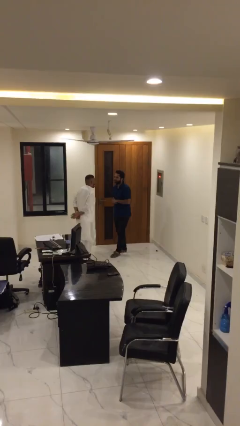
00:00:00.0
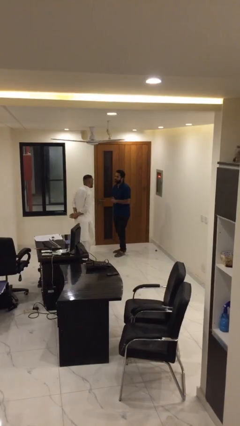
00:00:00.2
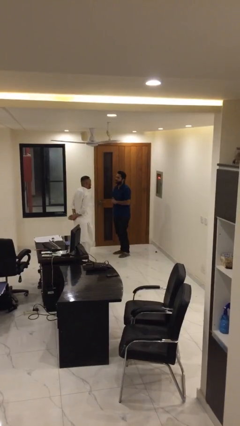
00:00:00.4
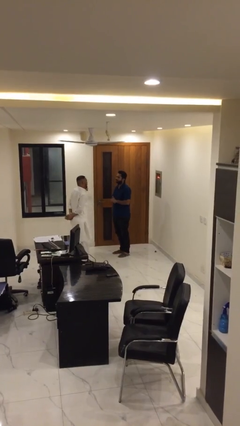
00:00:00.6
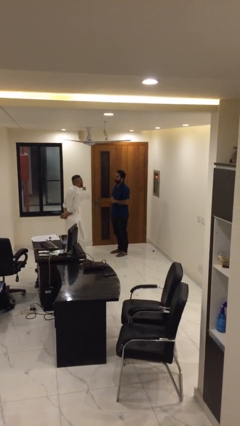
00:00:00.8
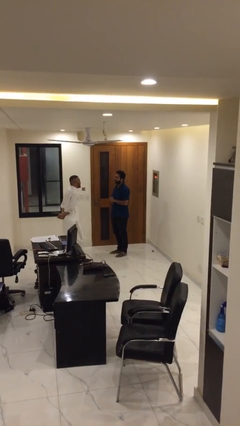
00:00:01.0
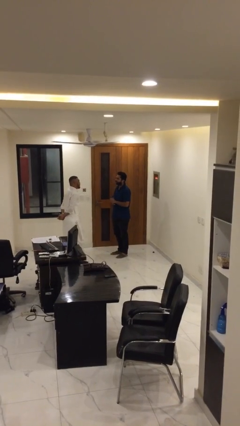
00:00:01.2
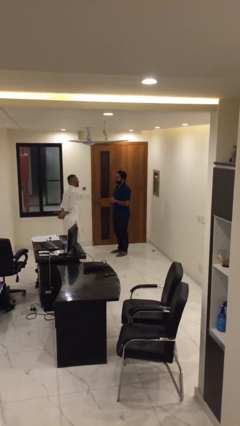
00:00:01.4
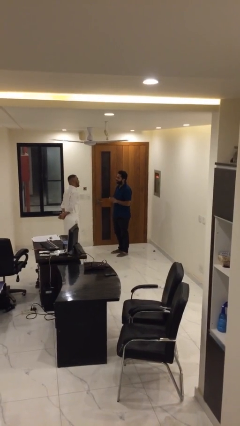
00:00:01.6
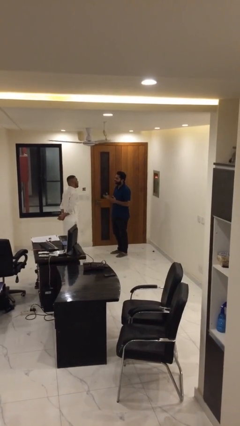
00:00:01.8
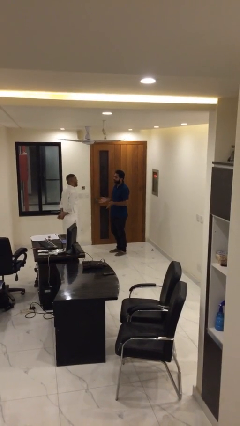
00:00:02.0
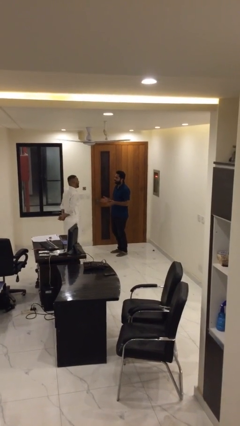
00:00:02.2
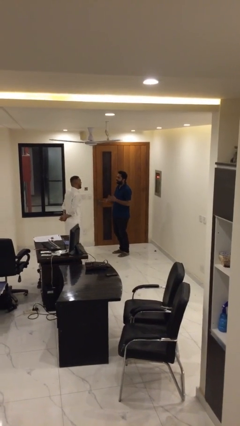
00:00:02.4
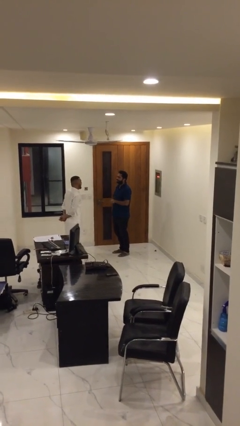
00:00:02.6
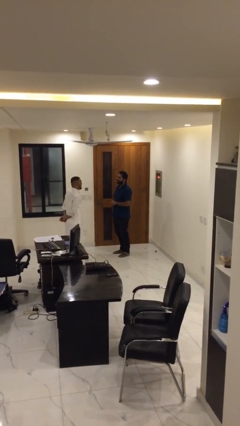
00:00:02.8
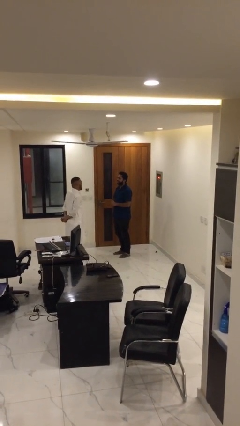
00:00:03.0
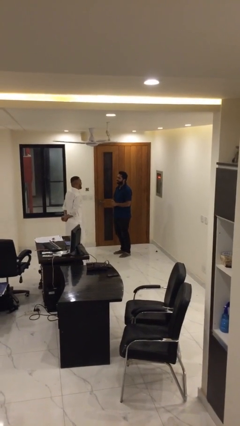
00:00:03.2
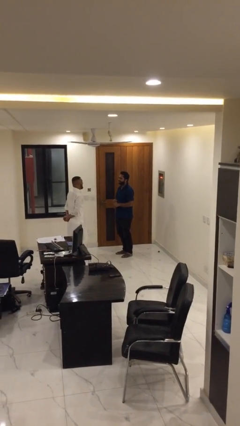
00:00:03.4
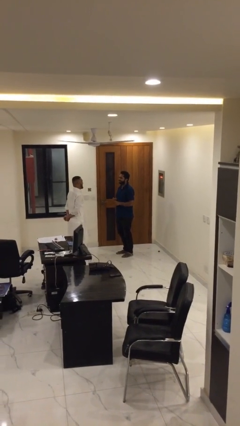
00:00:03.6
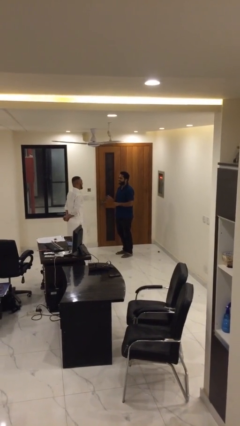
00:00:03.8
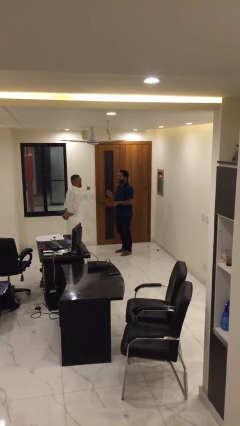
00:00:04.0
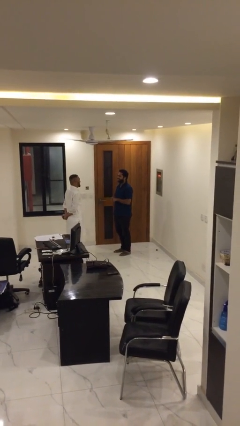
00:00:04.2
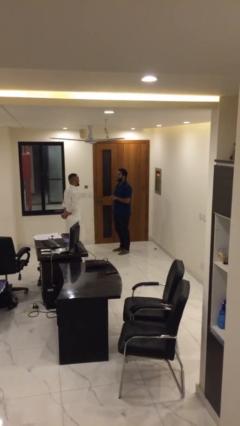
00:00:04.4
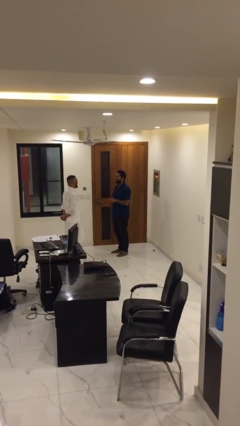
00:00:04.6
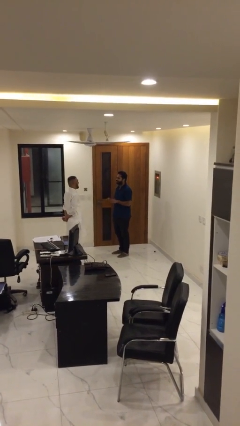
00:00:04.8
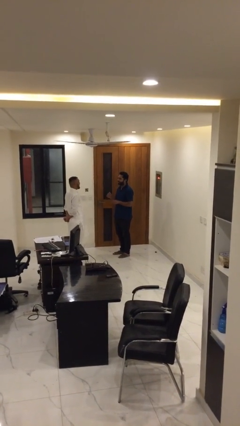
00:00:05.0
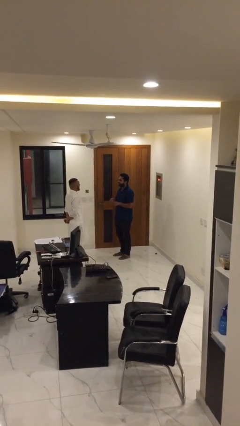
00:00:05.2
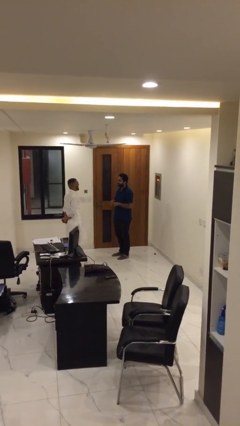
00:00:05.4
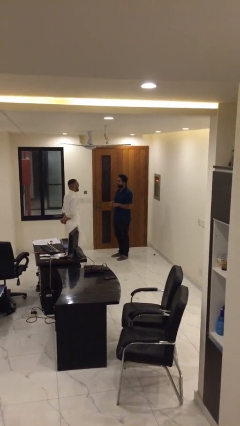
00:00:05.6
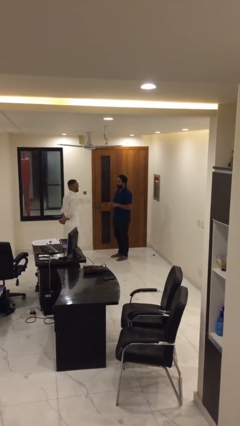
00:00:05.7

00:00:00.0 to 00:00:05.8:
person talks to person

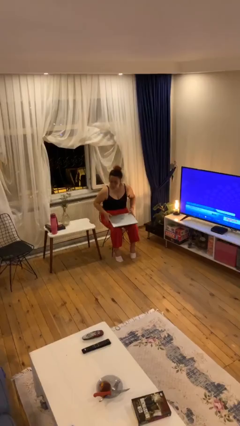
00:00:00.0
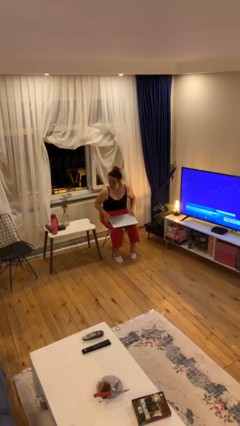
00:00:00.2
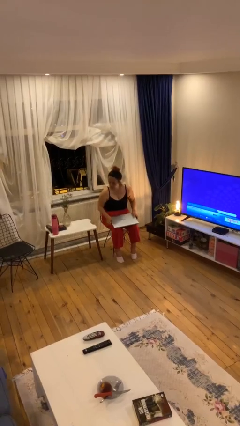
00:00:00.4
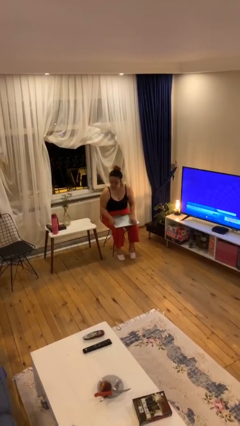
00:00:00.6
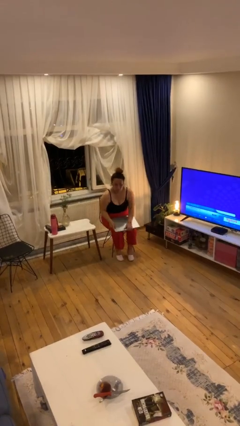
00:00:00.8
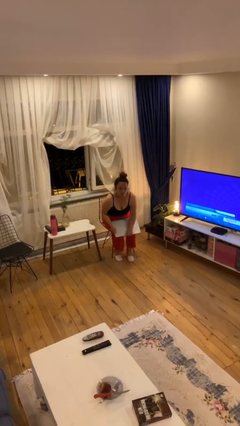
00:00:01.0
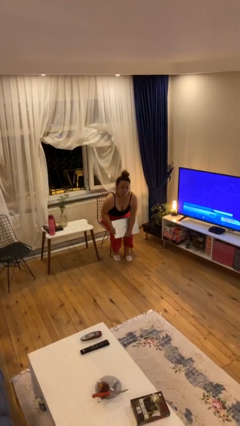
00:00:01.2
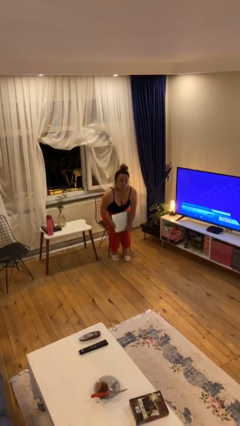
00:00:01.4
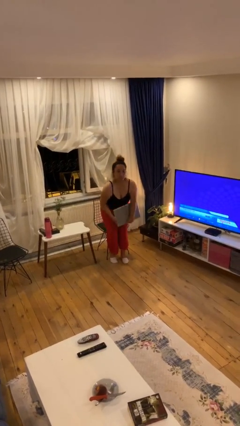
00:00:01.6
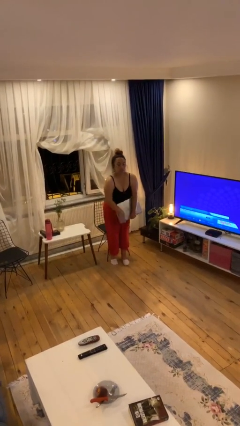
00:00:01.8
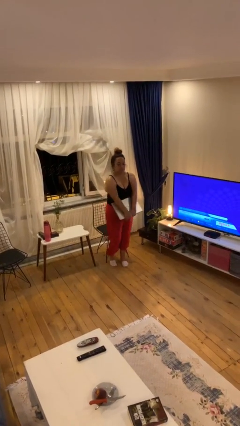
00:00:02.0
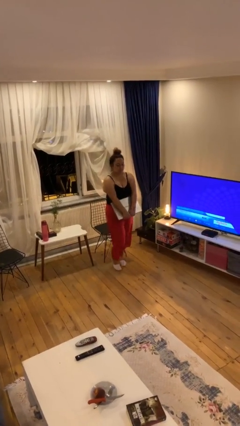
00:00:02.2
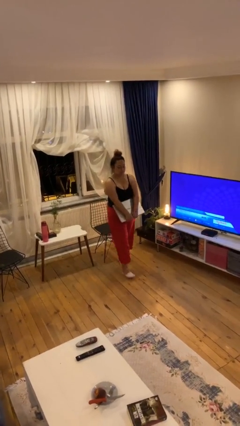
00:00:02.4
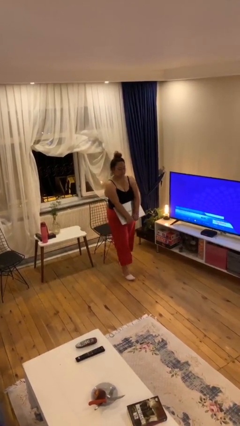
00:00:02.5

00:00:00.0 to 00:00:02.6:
person stands up

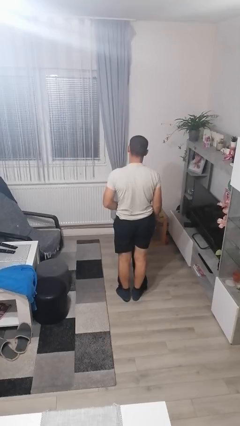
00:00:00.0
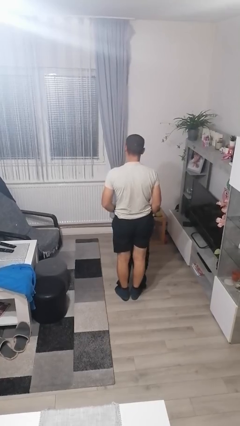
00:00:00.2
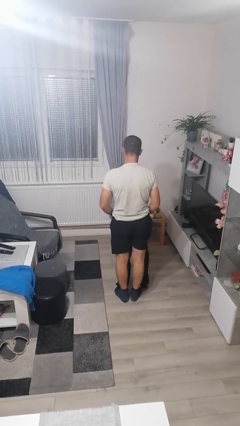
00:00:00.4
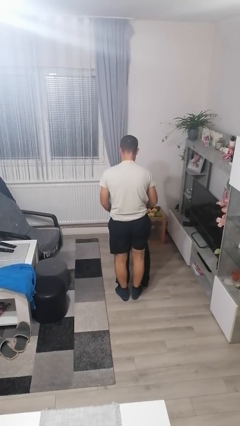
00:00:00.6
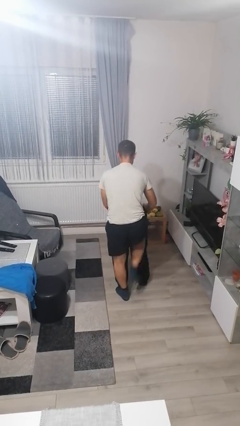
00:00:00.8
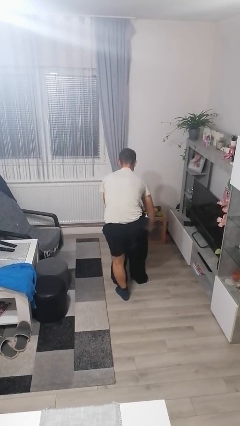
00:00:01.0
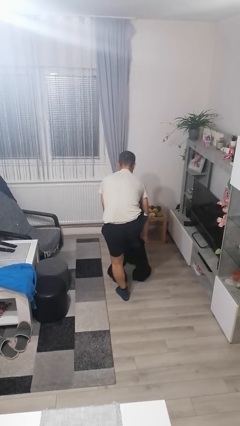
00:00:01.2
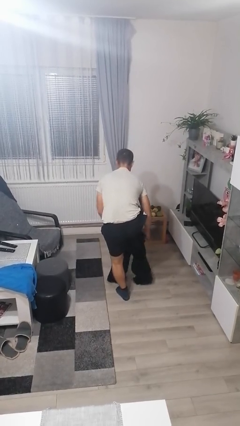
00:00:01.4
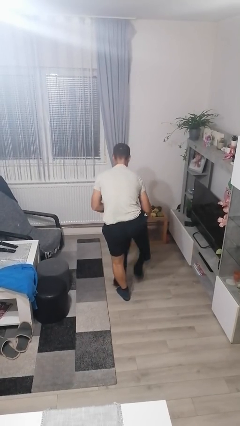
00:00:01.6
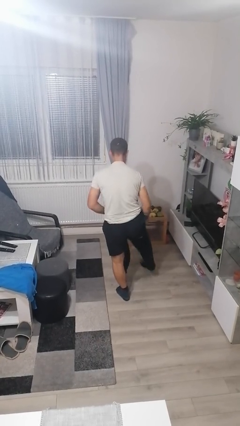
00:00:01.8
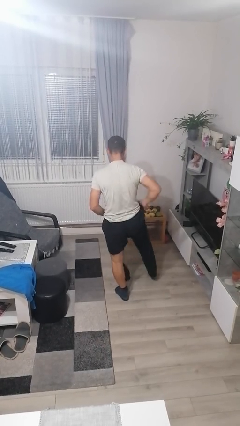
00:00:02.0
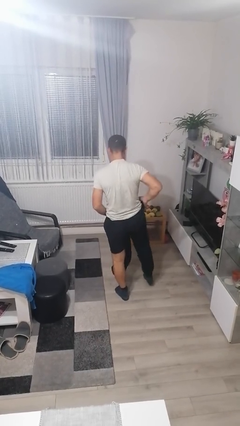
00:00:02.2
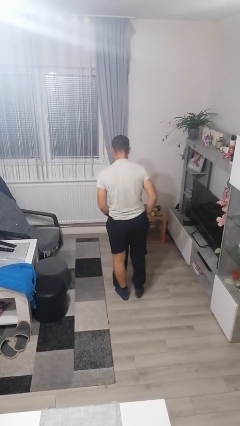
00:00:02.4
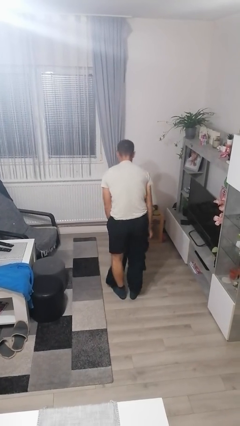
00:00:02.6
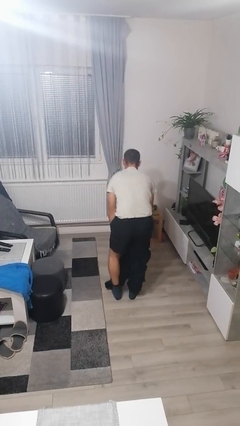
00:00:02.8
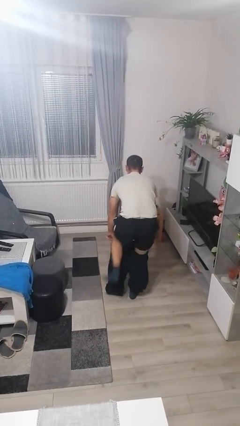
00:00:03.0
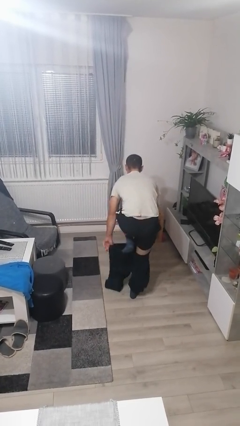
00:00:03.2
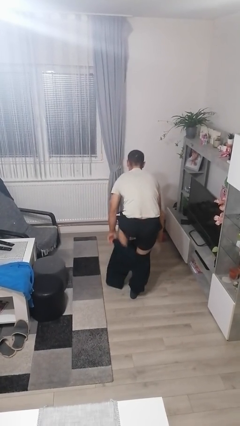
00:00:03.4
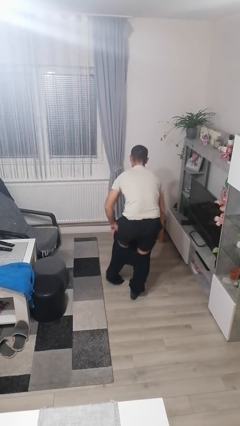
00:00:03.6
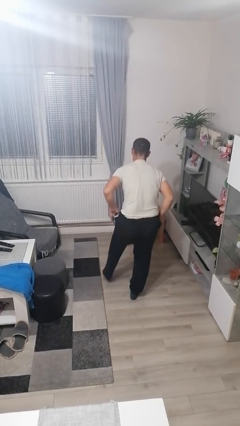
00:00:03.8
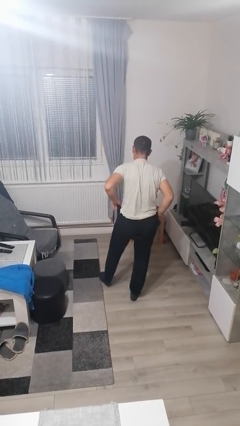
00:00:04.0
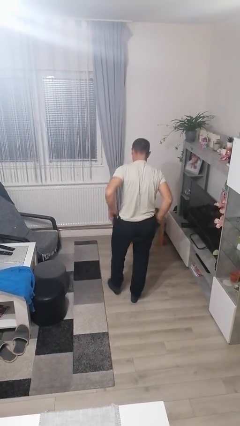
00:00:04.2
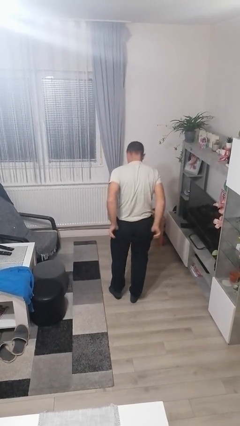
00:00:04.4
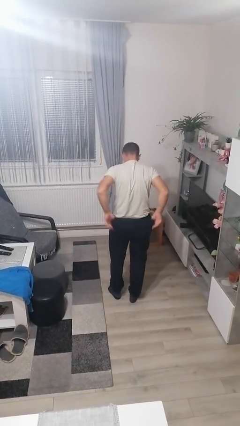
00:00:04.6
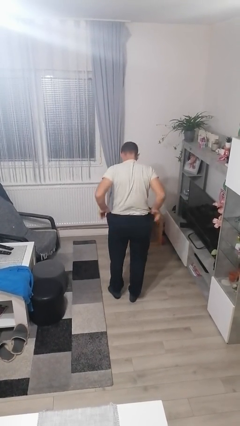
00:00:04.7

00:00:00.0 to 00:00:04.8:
person puts on pants

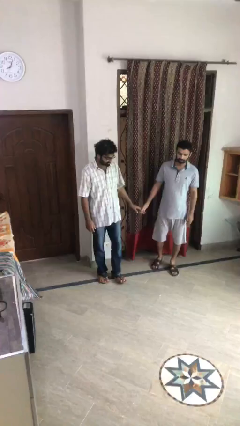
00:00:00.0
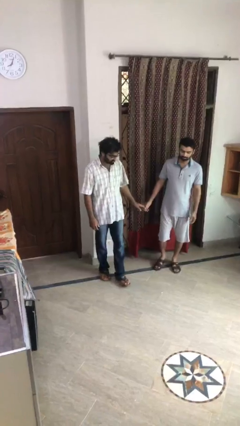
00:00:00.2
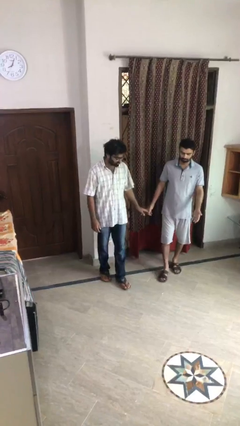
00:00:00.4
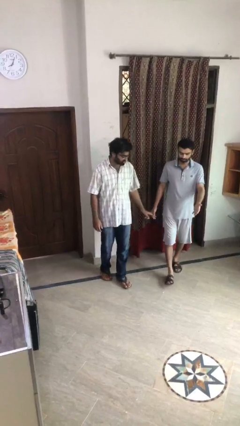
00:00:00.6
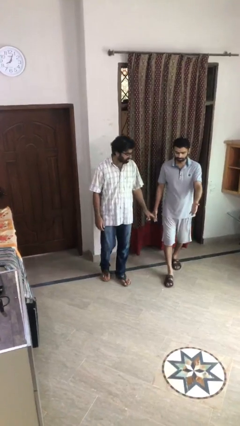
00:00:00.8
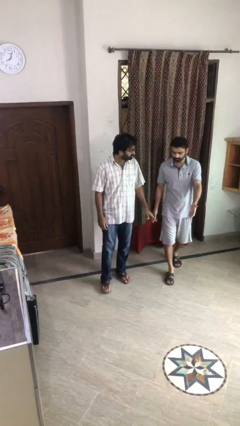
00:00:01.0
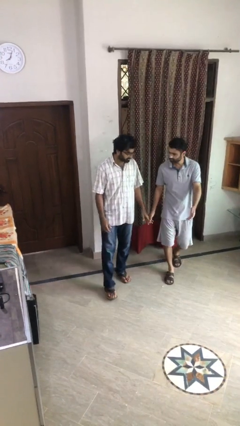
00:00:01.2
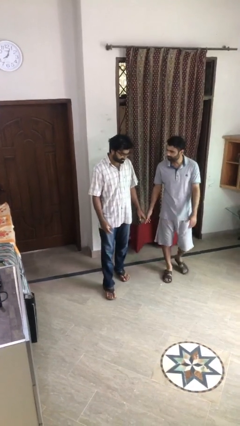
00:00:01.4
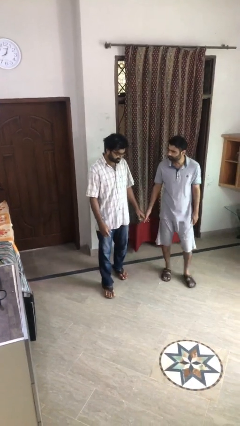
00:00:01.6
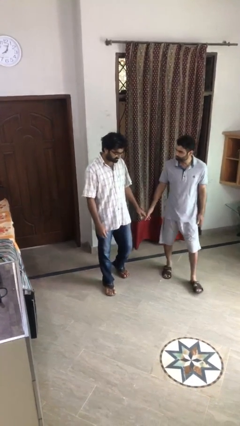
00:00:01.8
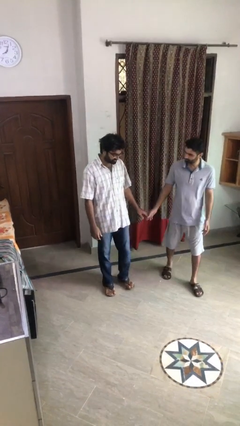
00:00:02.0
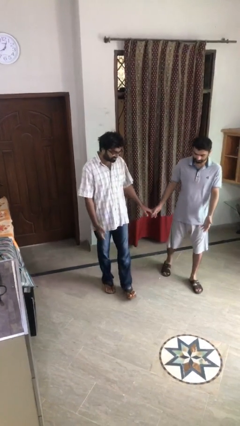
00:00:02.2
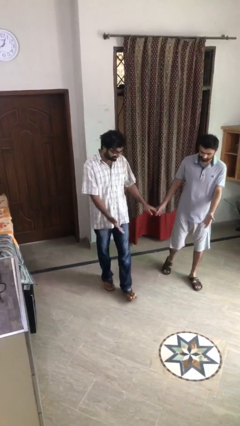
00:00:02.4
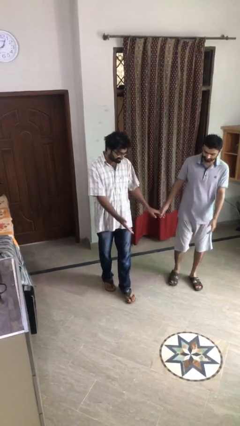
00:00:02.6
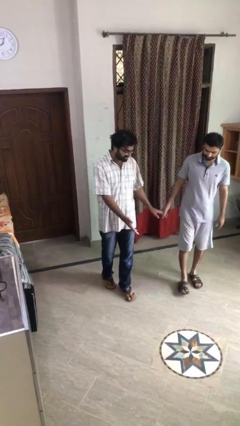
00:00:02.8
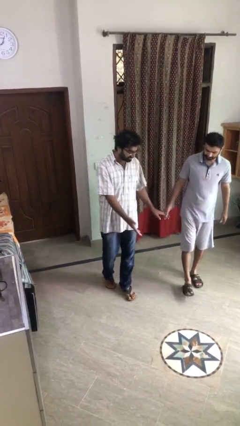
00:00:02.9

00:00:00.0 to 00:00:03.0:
person holds hand

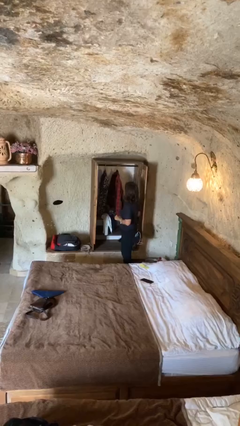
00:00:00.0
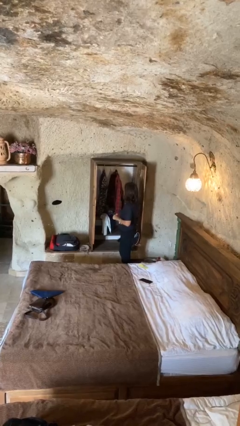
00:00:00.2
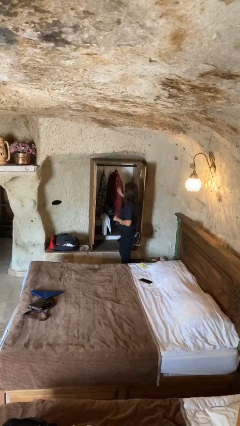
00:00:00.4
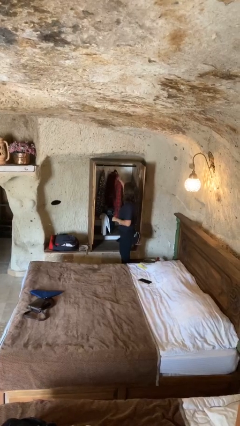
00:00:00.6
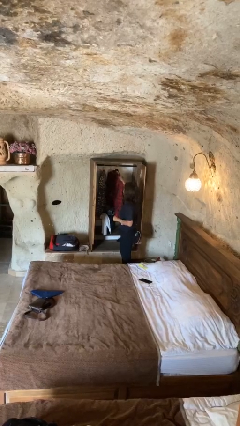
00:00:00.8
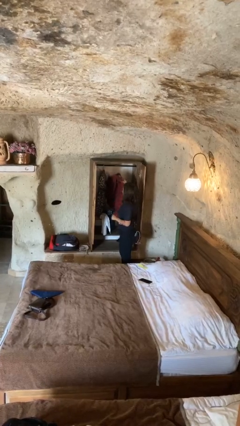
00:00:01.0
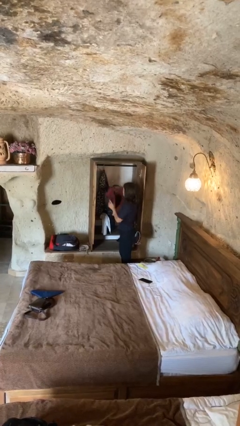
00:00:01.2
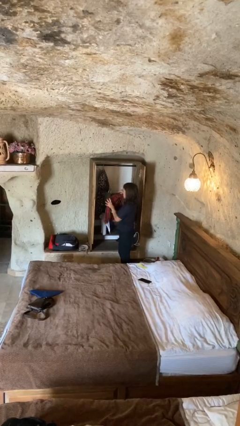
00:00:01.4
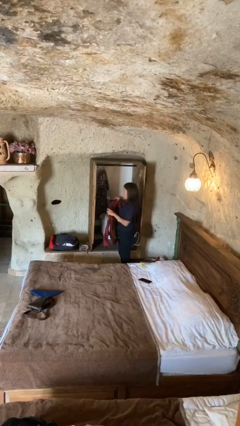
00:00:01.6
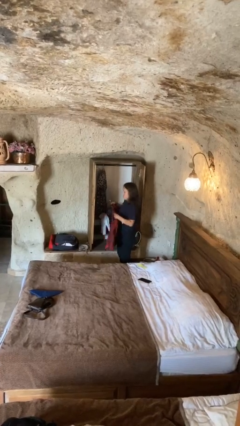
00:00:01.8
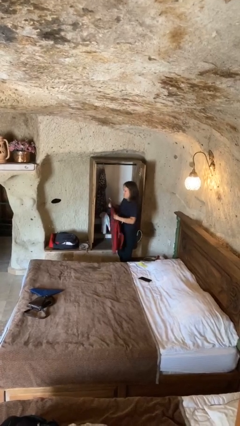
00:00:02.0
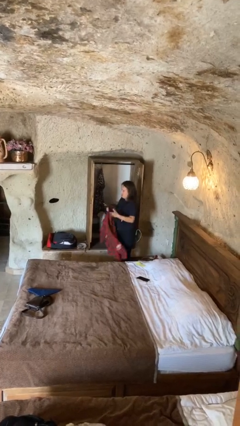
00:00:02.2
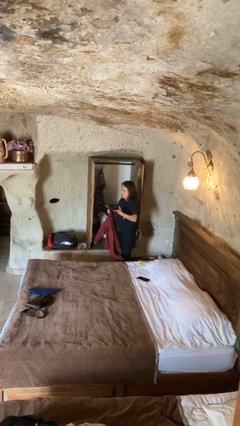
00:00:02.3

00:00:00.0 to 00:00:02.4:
person takes clothes from closet
